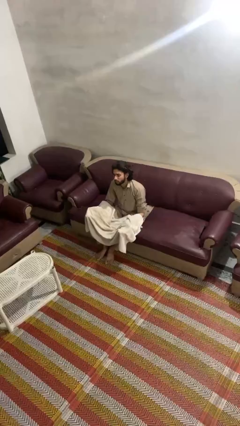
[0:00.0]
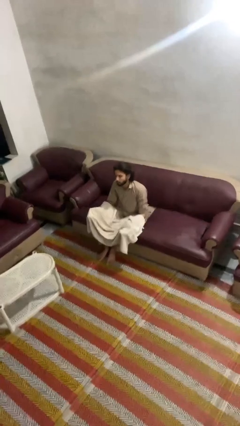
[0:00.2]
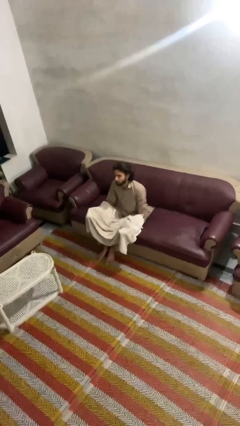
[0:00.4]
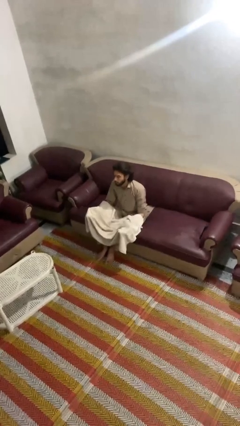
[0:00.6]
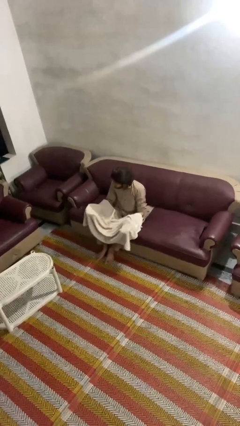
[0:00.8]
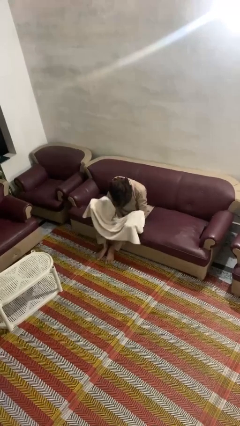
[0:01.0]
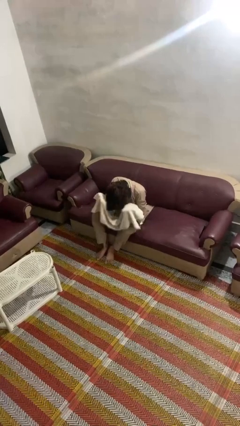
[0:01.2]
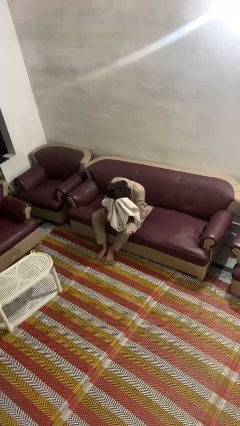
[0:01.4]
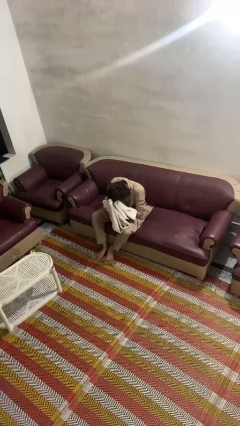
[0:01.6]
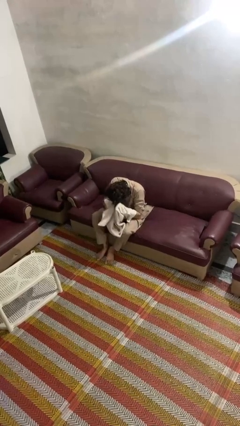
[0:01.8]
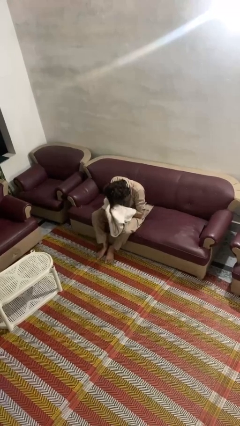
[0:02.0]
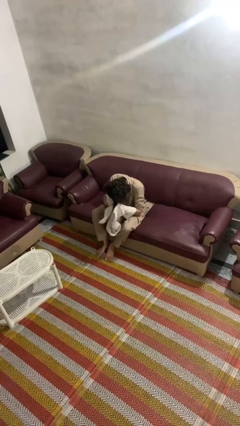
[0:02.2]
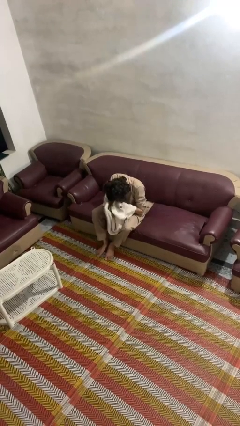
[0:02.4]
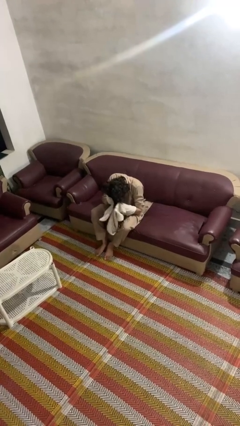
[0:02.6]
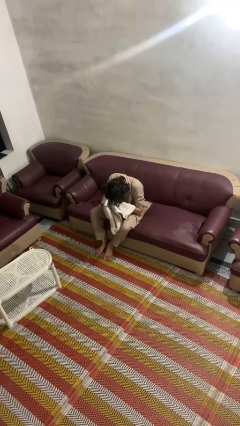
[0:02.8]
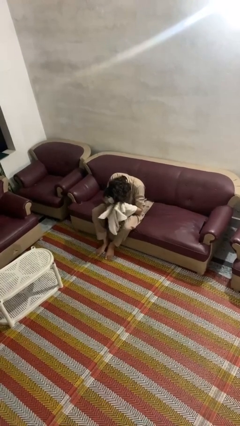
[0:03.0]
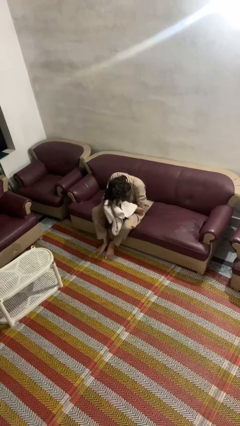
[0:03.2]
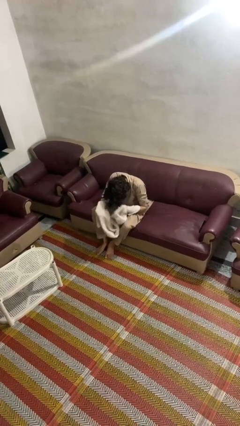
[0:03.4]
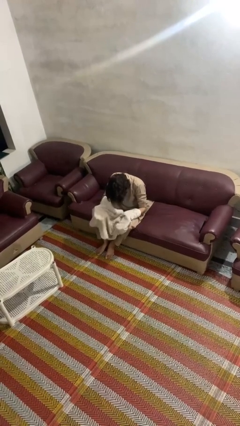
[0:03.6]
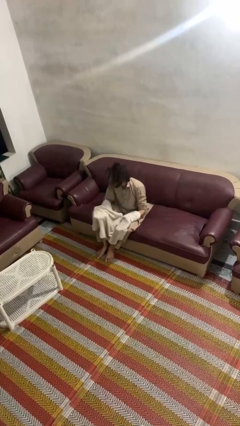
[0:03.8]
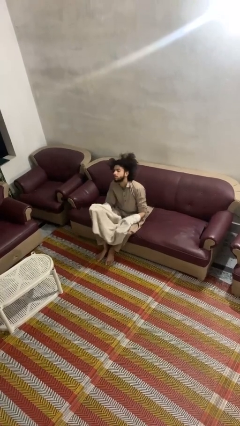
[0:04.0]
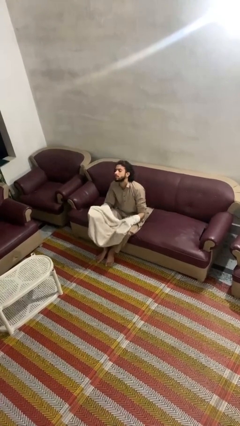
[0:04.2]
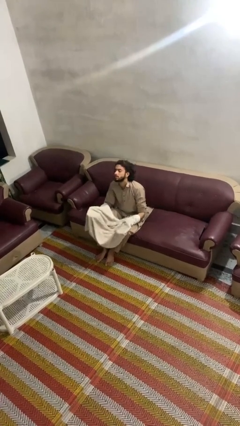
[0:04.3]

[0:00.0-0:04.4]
person dries hair with towel

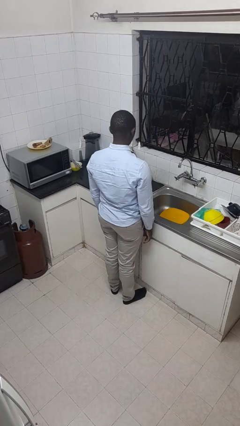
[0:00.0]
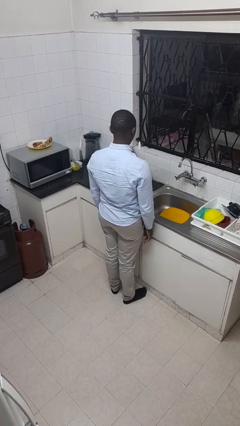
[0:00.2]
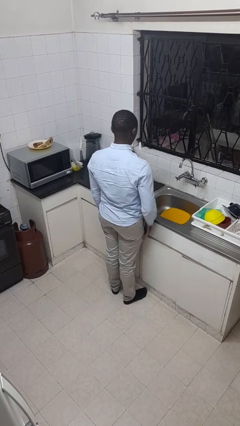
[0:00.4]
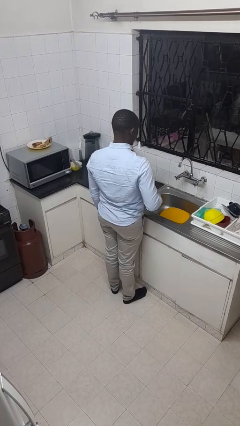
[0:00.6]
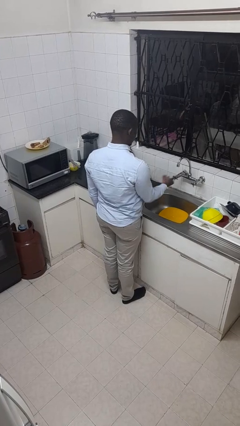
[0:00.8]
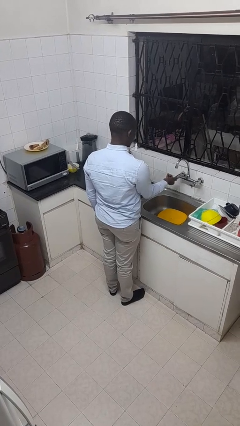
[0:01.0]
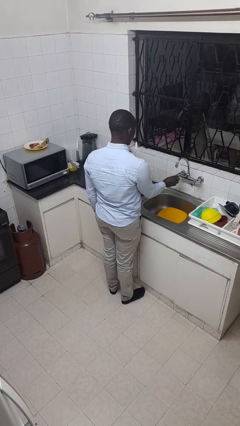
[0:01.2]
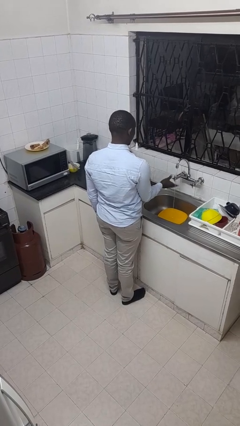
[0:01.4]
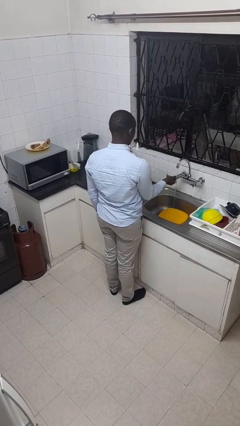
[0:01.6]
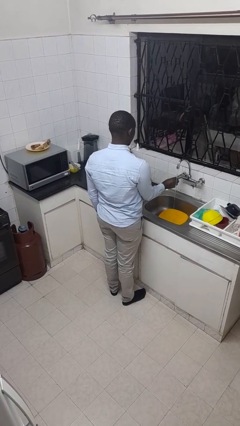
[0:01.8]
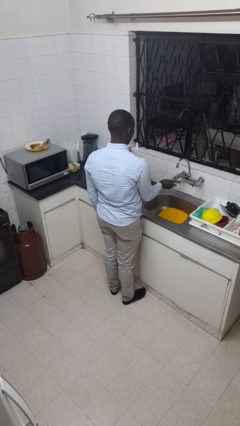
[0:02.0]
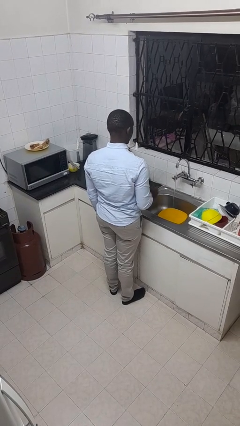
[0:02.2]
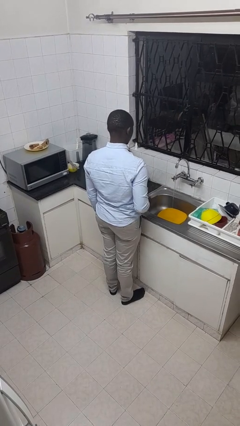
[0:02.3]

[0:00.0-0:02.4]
person turns on faucet

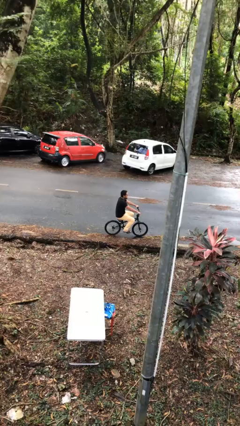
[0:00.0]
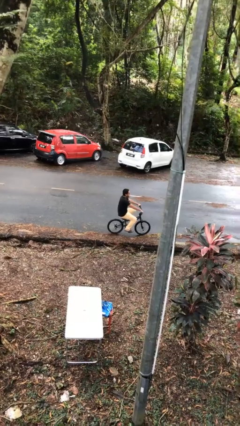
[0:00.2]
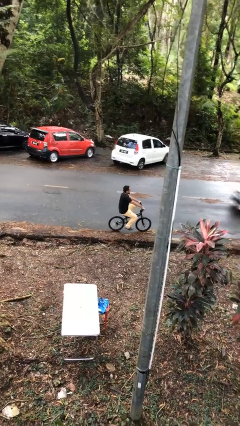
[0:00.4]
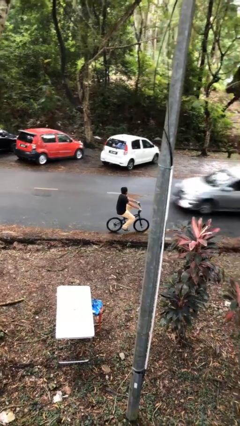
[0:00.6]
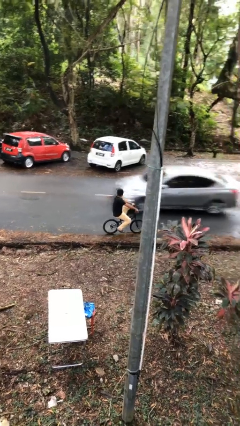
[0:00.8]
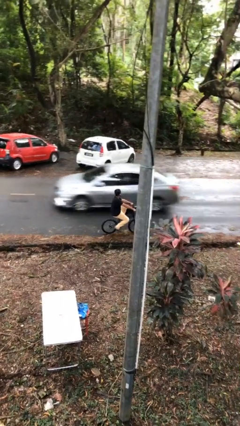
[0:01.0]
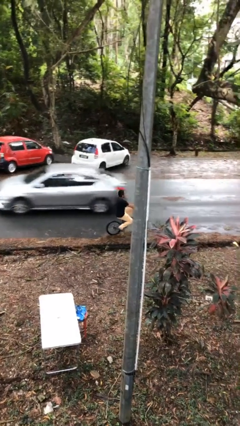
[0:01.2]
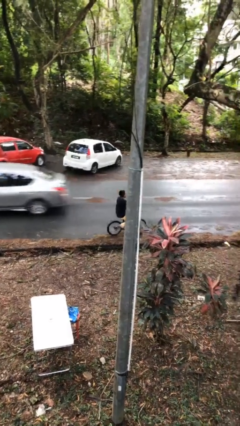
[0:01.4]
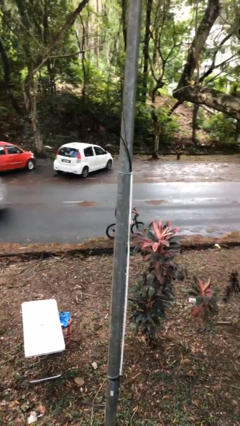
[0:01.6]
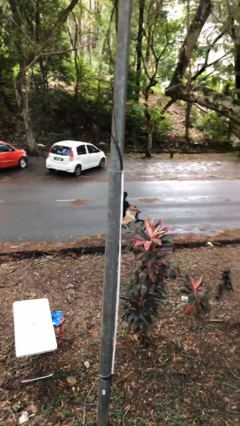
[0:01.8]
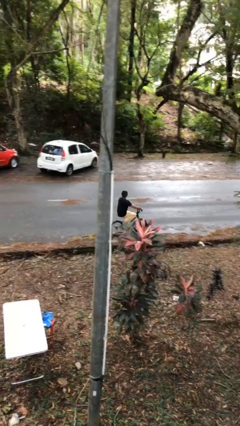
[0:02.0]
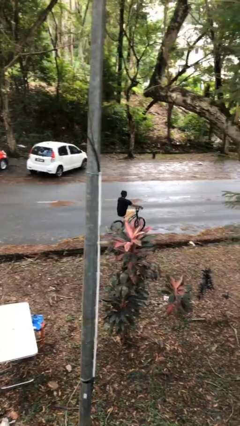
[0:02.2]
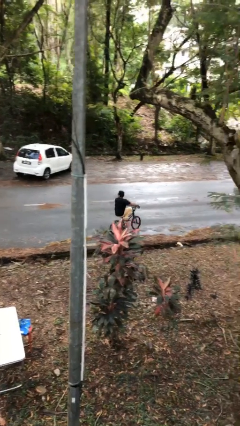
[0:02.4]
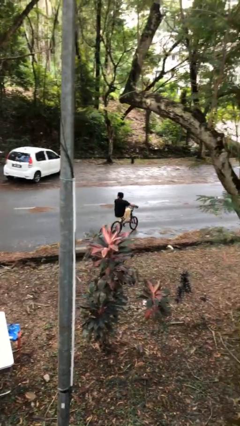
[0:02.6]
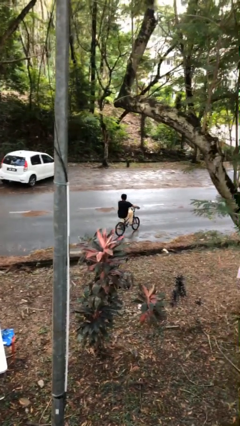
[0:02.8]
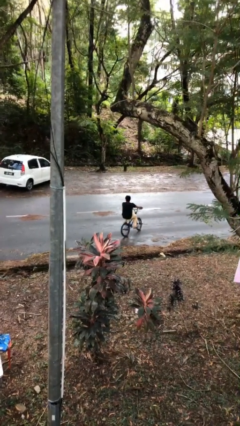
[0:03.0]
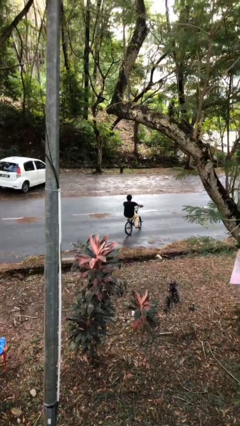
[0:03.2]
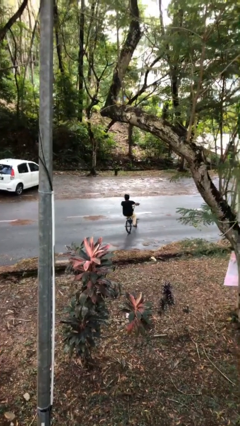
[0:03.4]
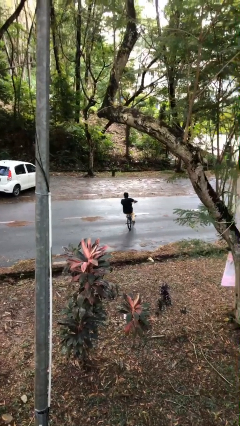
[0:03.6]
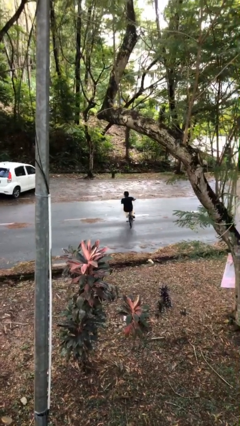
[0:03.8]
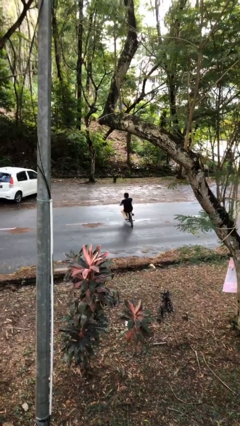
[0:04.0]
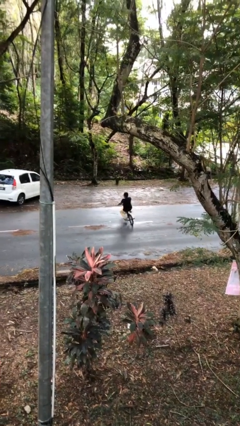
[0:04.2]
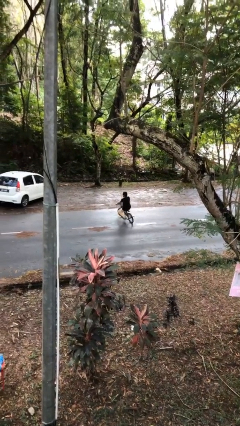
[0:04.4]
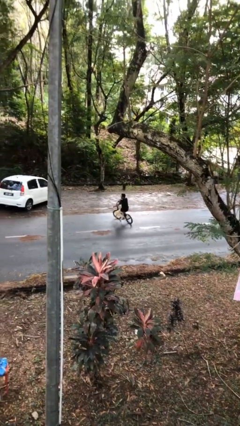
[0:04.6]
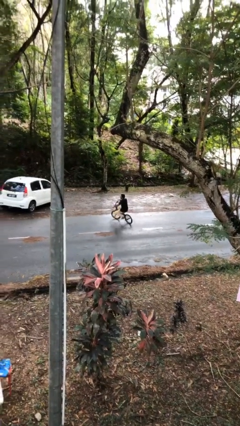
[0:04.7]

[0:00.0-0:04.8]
person rides bicycle

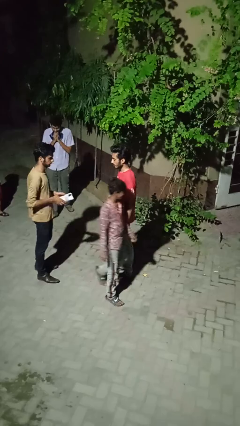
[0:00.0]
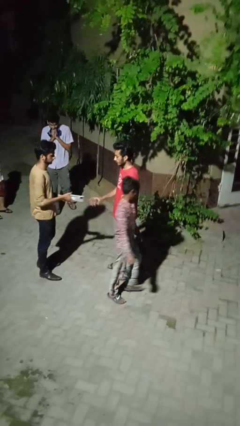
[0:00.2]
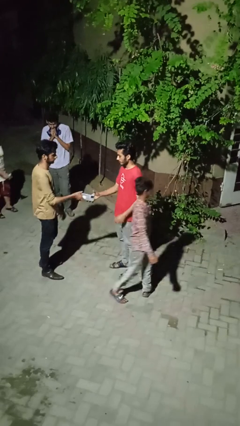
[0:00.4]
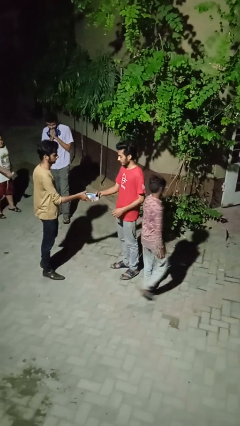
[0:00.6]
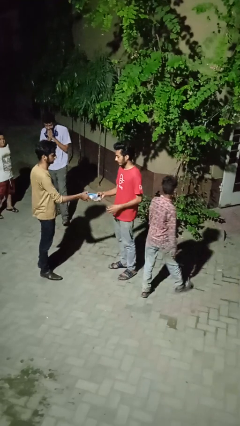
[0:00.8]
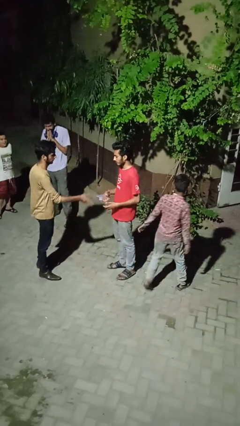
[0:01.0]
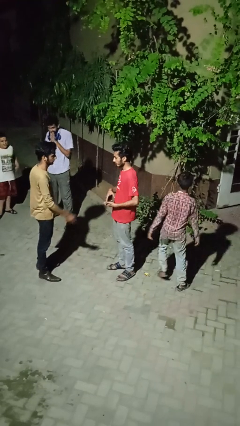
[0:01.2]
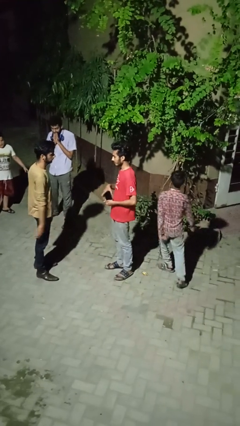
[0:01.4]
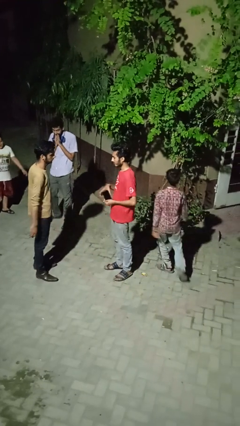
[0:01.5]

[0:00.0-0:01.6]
person transfers object to person

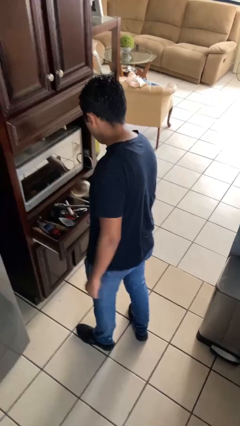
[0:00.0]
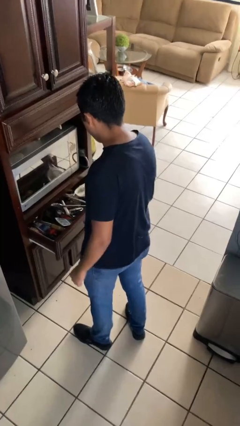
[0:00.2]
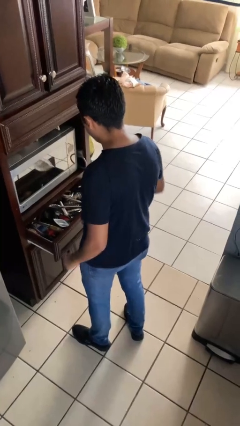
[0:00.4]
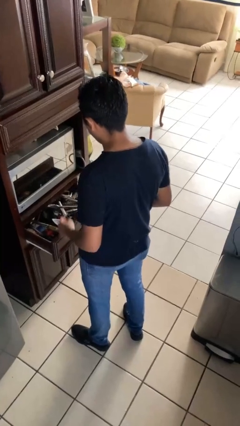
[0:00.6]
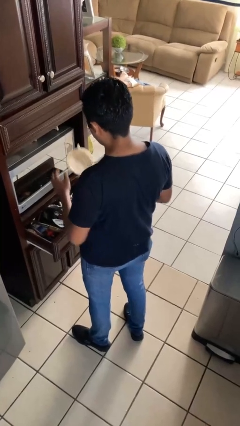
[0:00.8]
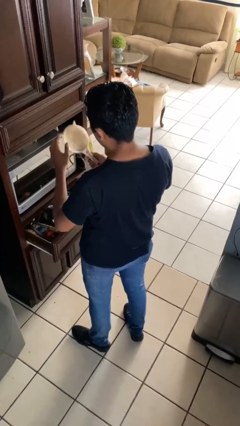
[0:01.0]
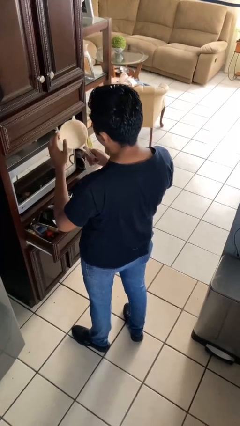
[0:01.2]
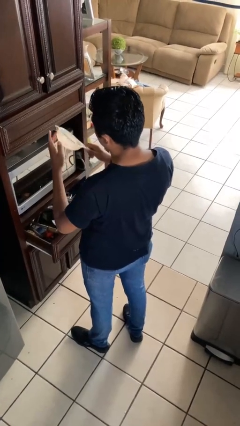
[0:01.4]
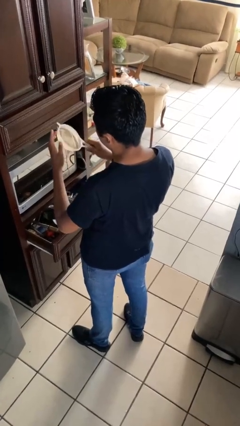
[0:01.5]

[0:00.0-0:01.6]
person takes object from kitchen drawer

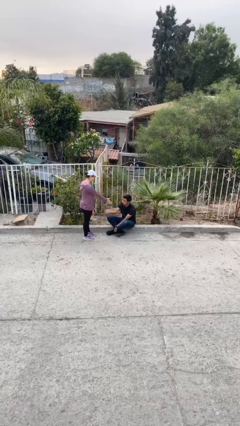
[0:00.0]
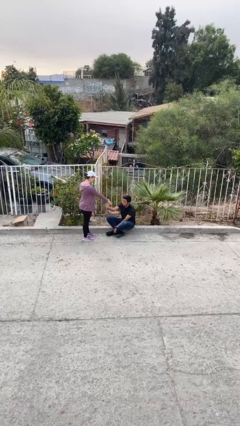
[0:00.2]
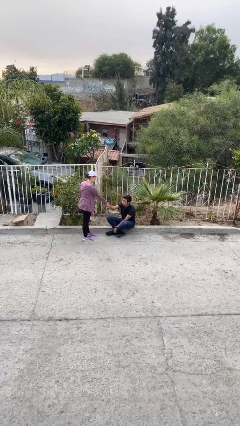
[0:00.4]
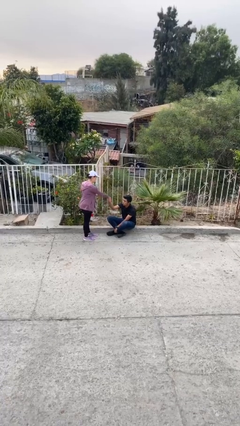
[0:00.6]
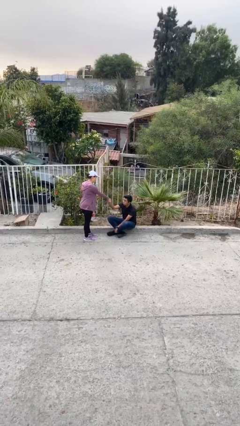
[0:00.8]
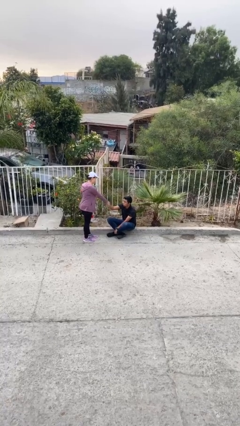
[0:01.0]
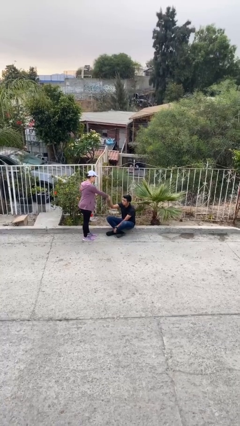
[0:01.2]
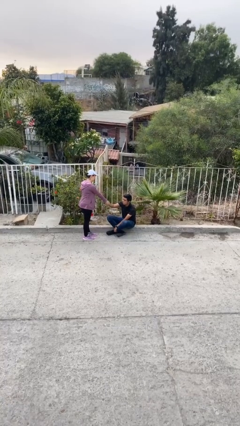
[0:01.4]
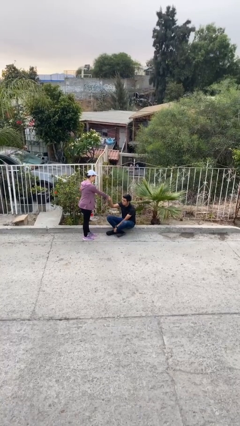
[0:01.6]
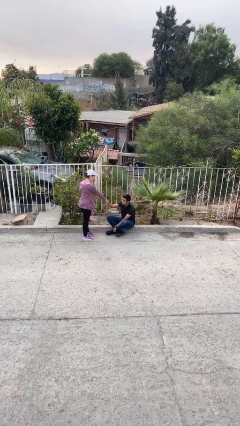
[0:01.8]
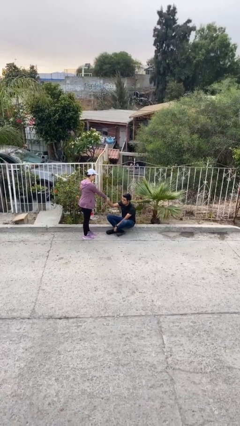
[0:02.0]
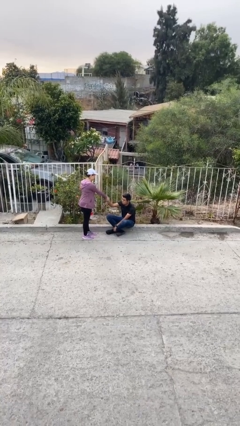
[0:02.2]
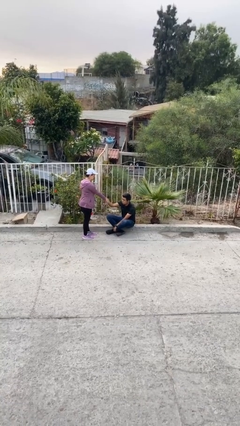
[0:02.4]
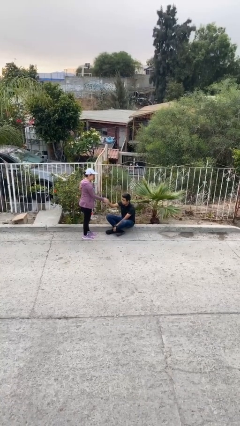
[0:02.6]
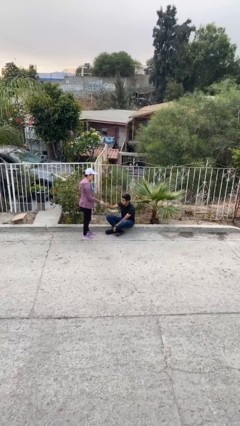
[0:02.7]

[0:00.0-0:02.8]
person shakes hand
